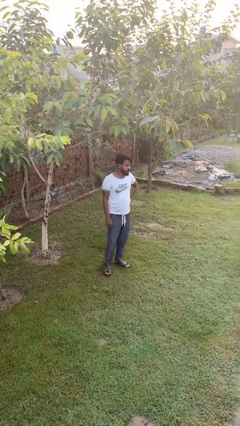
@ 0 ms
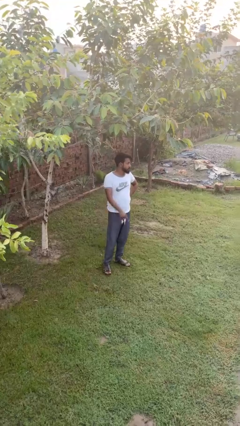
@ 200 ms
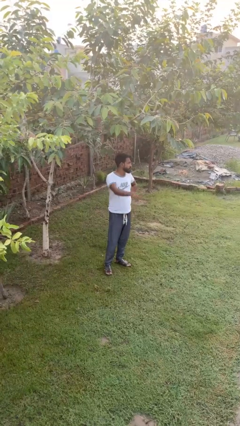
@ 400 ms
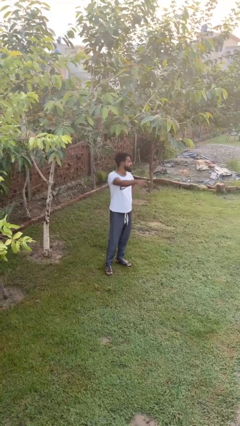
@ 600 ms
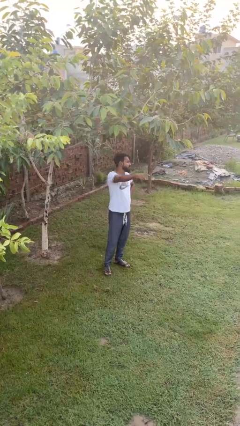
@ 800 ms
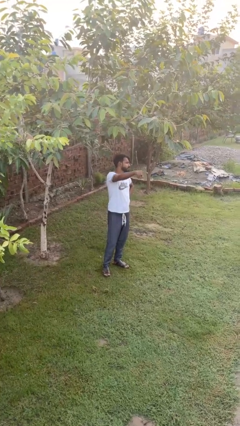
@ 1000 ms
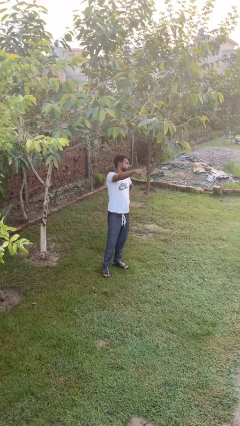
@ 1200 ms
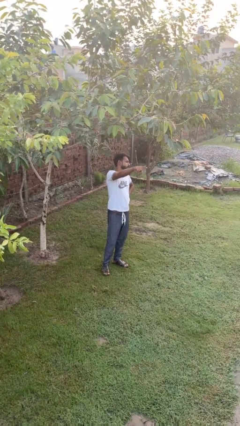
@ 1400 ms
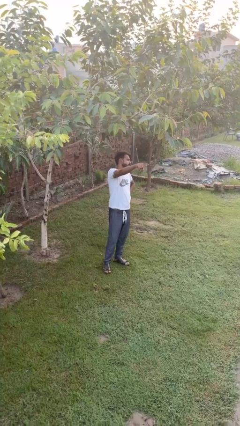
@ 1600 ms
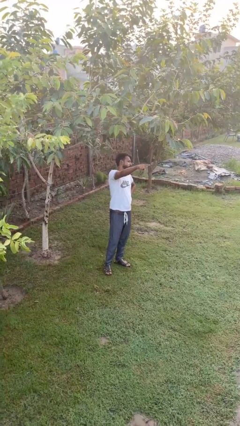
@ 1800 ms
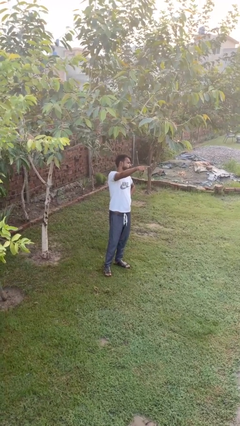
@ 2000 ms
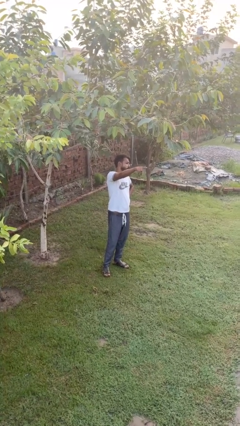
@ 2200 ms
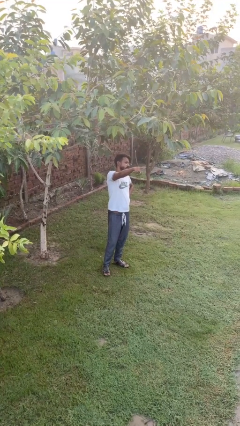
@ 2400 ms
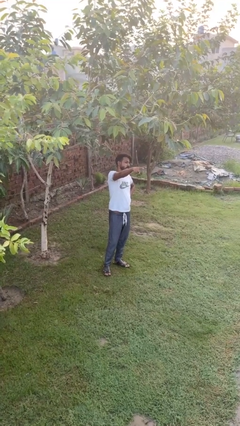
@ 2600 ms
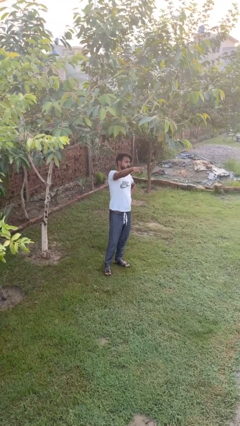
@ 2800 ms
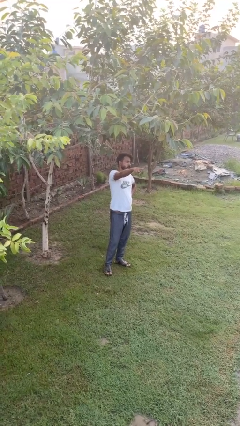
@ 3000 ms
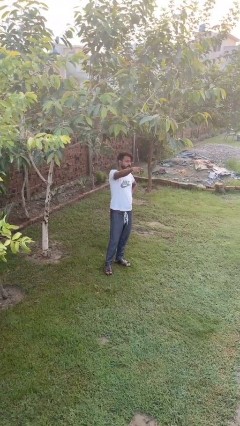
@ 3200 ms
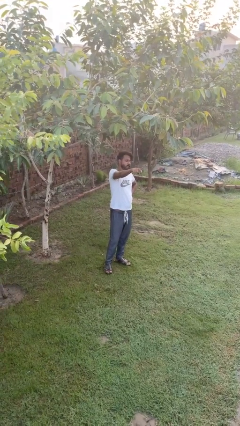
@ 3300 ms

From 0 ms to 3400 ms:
person points at person

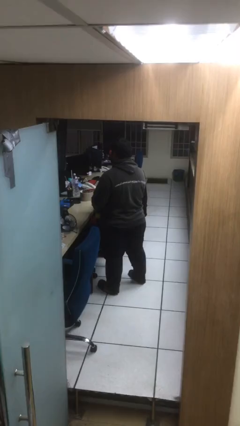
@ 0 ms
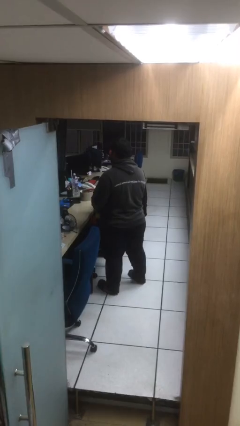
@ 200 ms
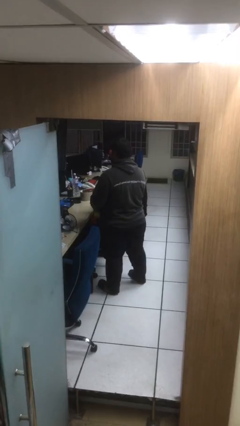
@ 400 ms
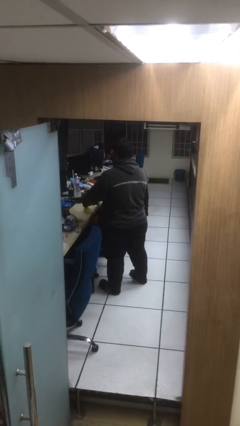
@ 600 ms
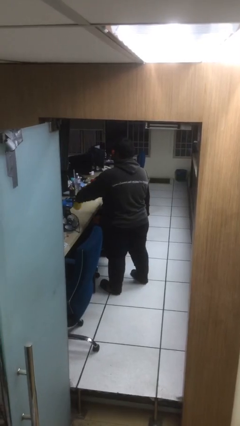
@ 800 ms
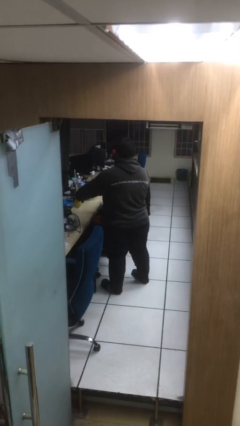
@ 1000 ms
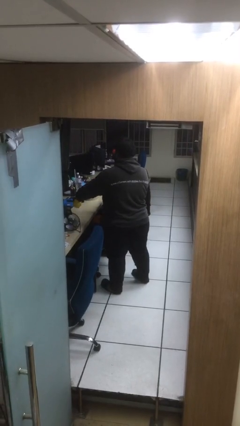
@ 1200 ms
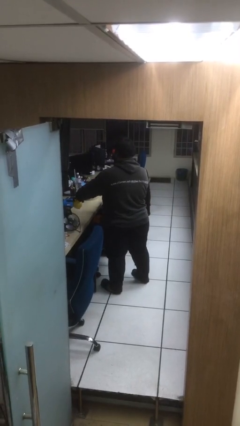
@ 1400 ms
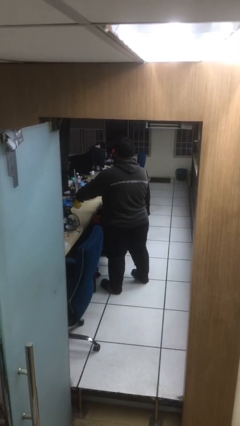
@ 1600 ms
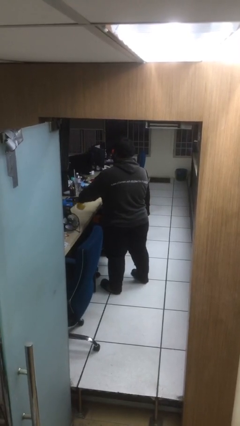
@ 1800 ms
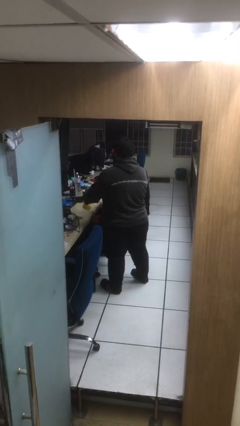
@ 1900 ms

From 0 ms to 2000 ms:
person sprays from bottle

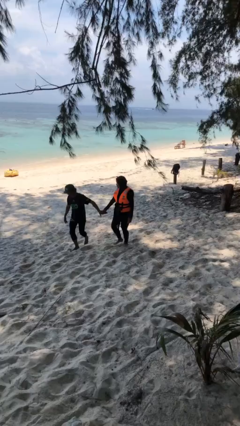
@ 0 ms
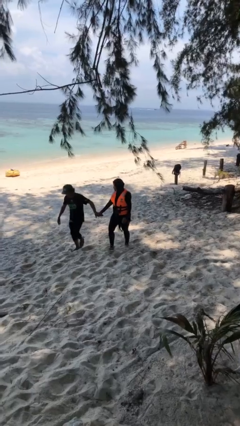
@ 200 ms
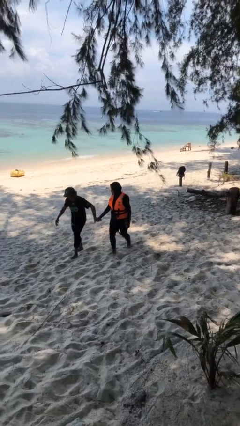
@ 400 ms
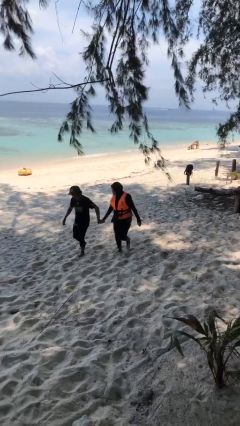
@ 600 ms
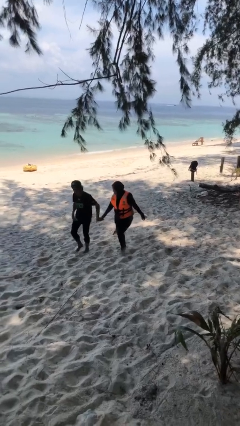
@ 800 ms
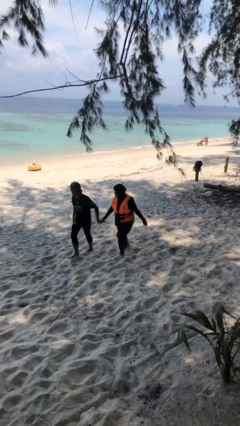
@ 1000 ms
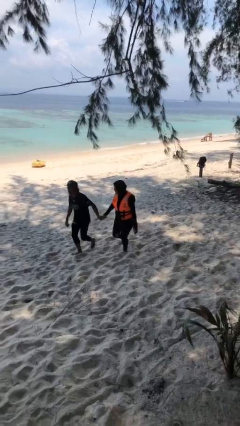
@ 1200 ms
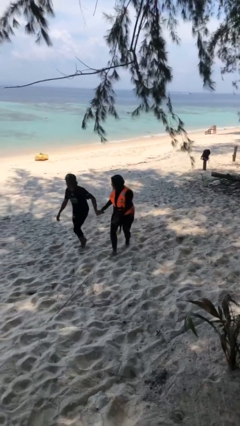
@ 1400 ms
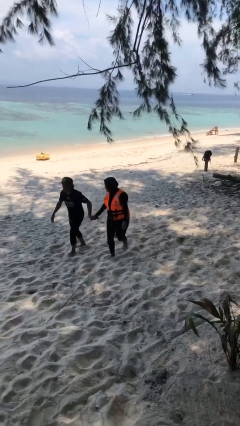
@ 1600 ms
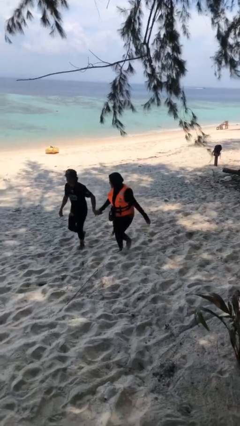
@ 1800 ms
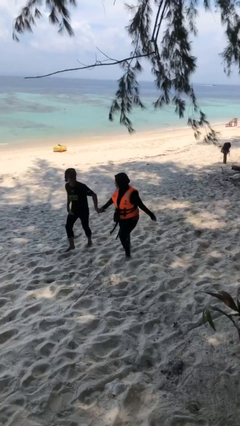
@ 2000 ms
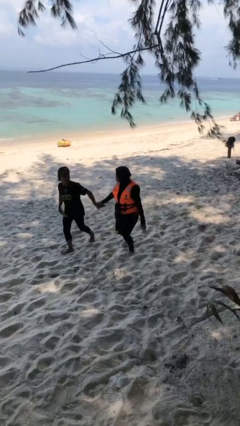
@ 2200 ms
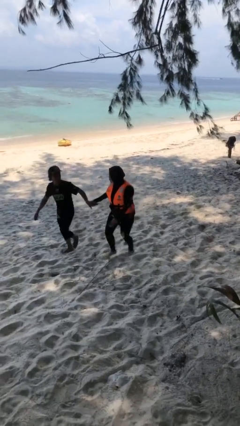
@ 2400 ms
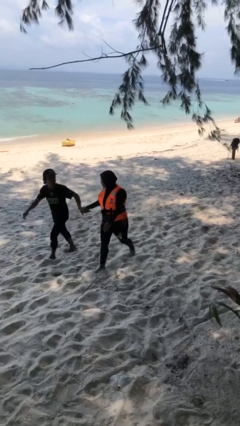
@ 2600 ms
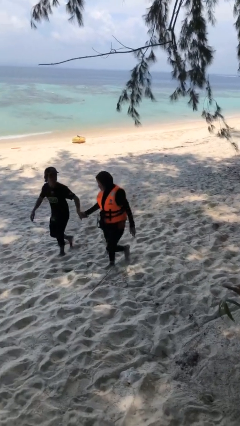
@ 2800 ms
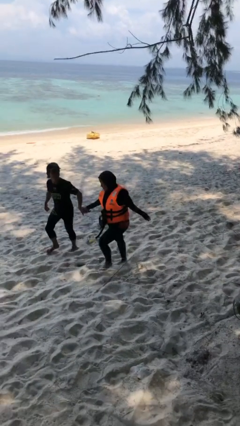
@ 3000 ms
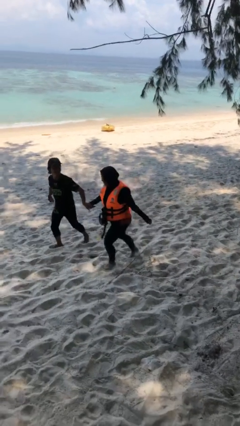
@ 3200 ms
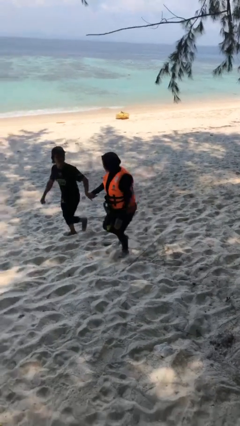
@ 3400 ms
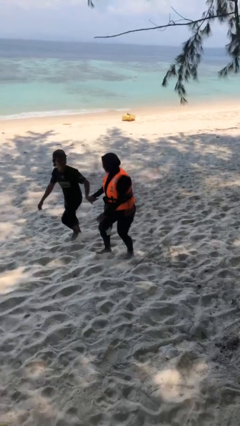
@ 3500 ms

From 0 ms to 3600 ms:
person holds hand

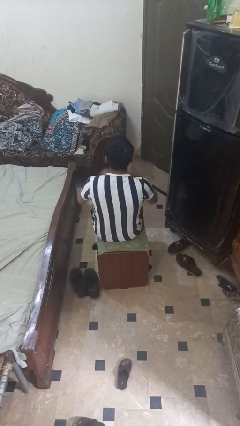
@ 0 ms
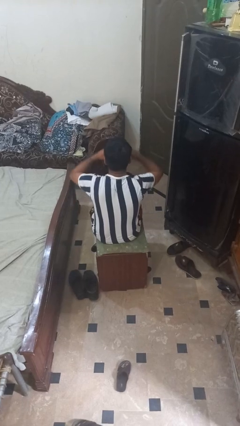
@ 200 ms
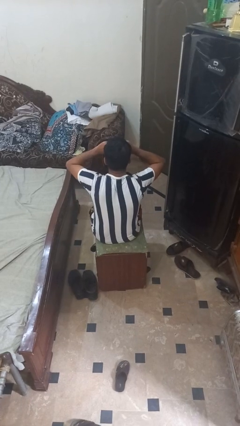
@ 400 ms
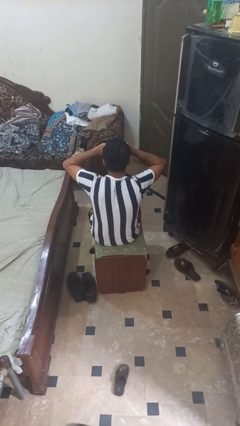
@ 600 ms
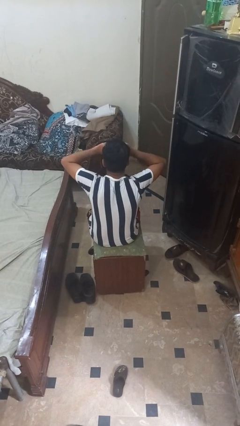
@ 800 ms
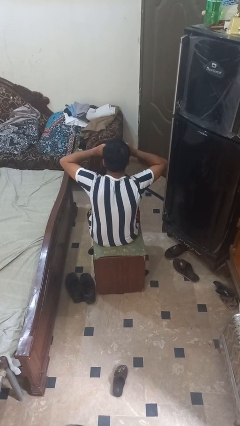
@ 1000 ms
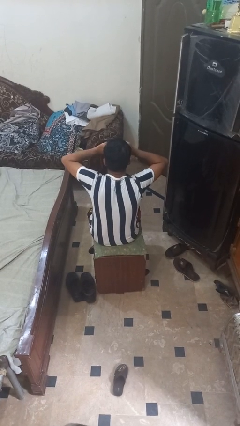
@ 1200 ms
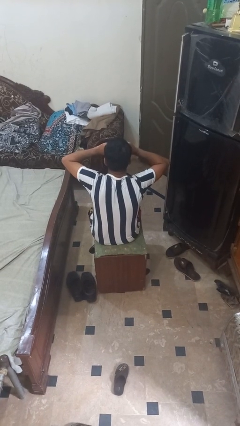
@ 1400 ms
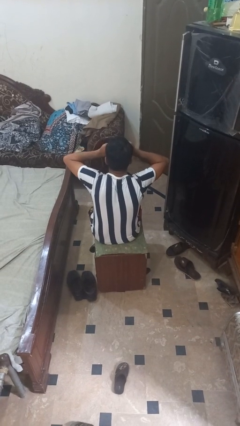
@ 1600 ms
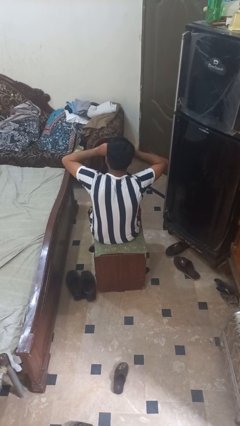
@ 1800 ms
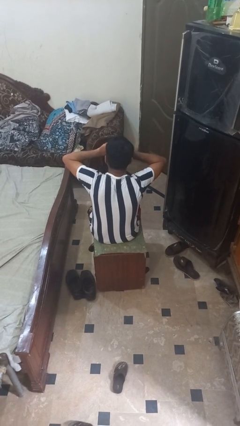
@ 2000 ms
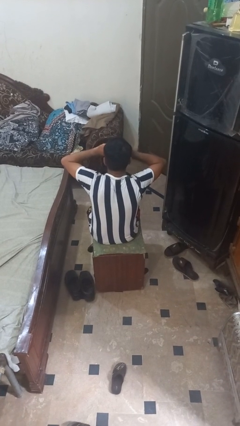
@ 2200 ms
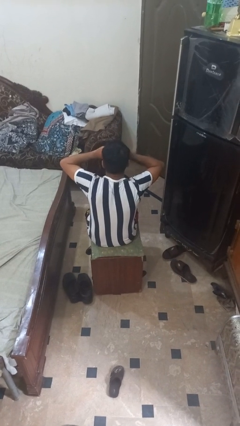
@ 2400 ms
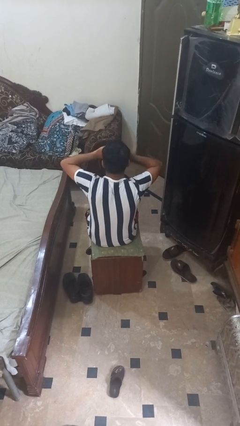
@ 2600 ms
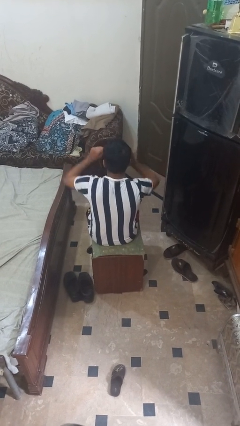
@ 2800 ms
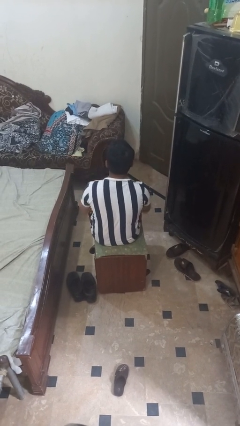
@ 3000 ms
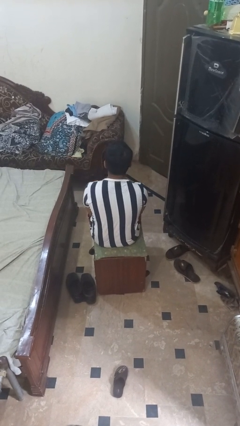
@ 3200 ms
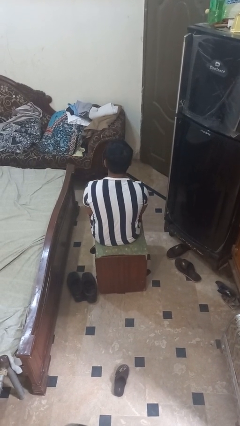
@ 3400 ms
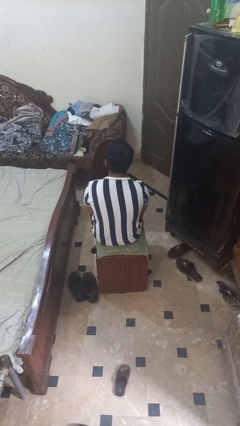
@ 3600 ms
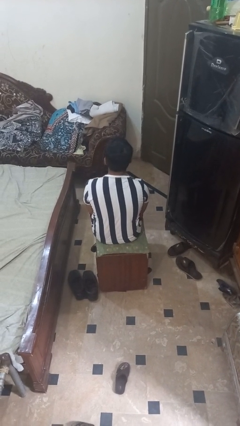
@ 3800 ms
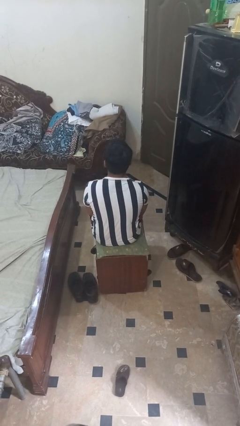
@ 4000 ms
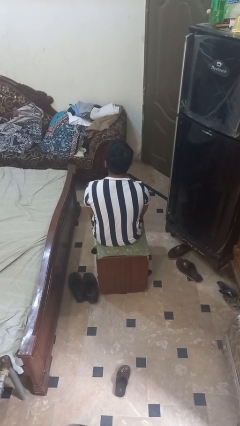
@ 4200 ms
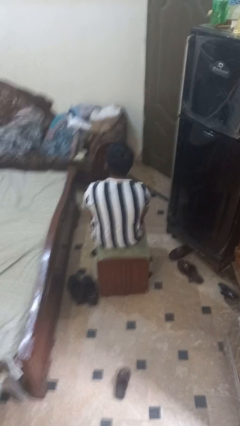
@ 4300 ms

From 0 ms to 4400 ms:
person rubs eyes

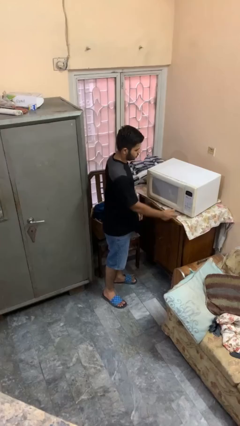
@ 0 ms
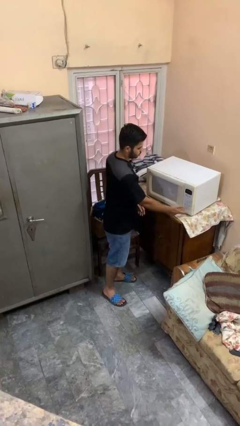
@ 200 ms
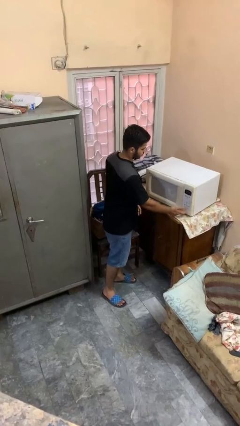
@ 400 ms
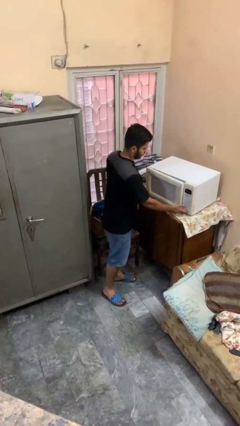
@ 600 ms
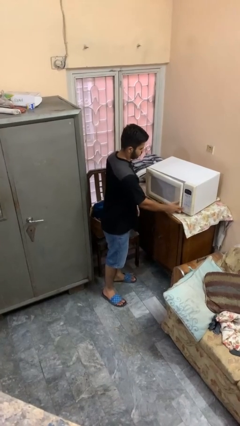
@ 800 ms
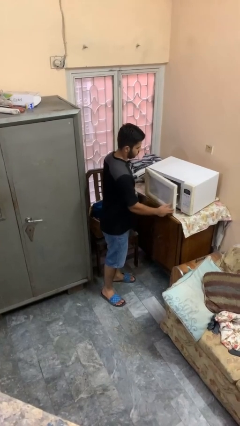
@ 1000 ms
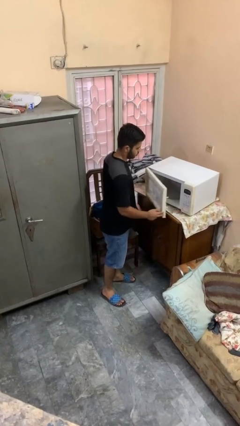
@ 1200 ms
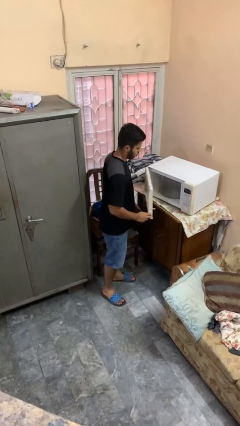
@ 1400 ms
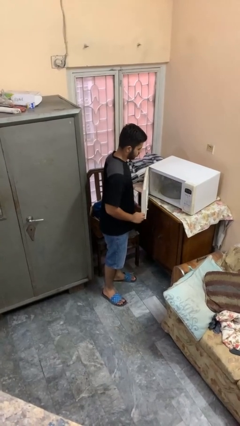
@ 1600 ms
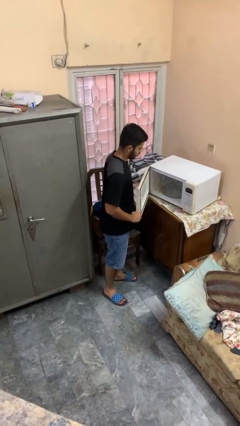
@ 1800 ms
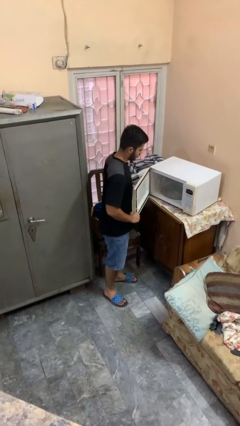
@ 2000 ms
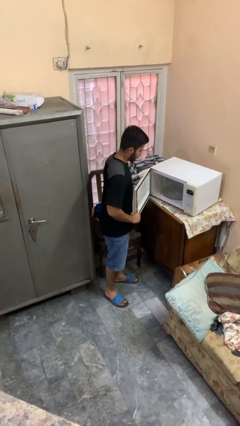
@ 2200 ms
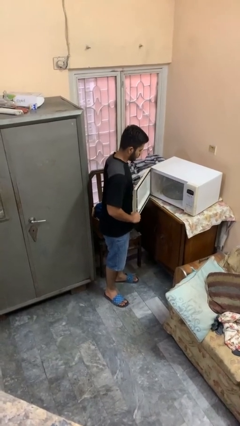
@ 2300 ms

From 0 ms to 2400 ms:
person opens microwave

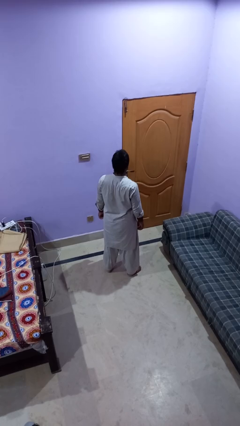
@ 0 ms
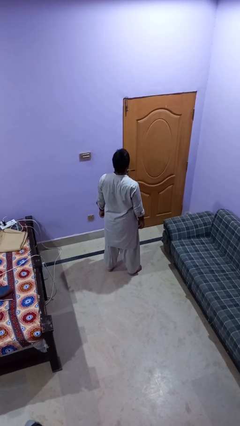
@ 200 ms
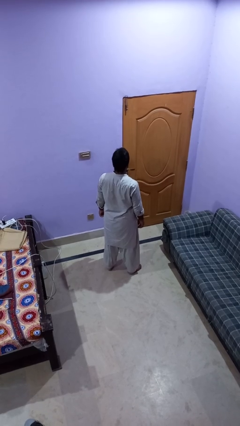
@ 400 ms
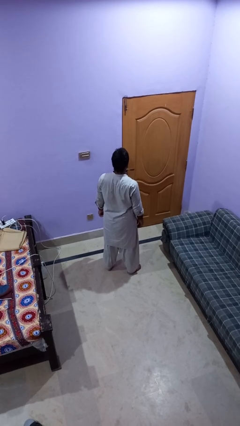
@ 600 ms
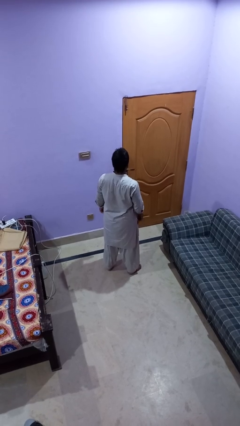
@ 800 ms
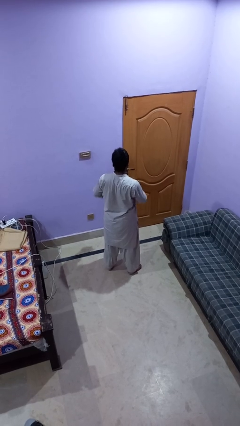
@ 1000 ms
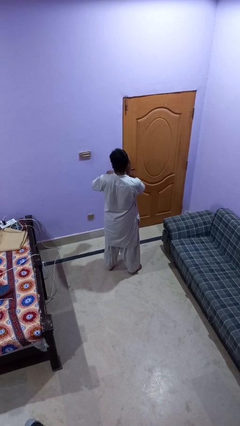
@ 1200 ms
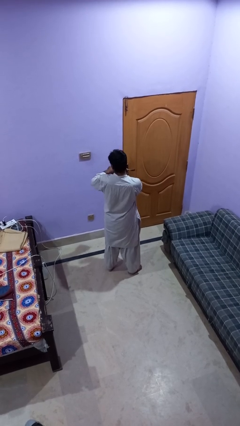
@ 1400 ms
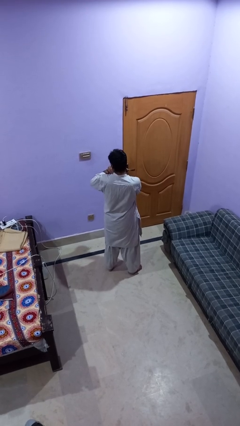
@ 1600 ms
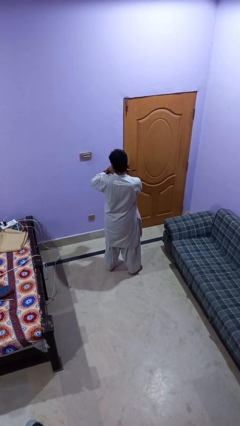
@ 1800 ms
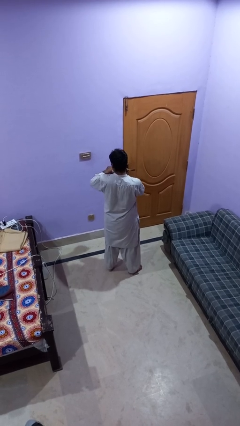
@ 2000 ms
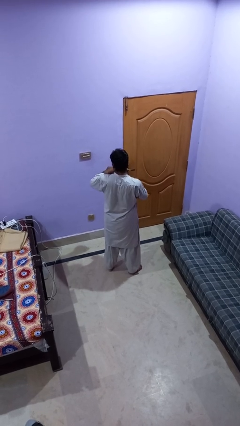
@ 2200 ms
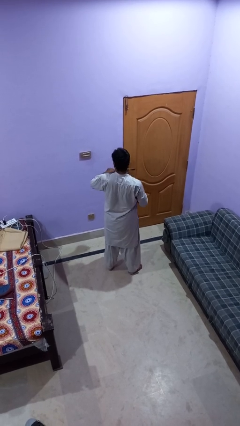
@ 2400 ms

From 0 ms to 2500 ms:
person swats bug
